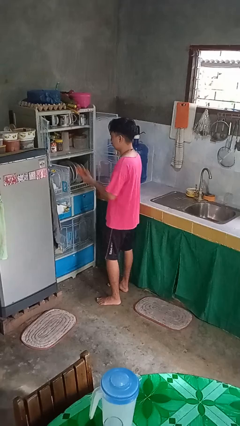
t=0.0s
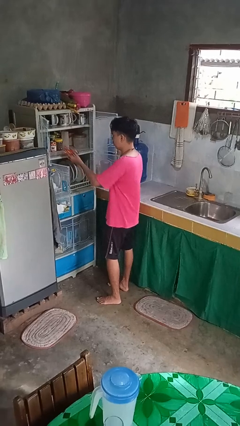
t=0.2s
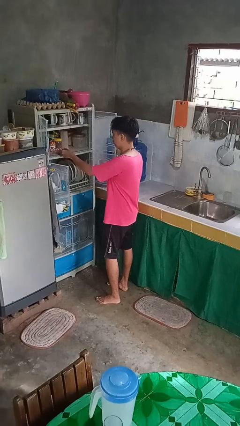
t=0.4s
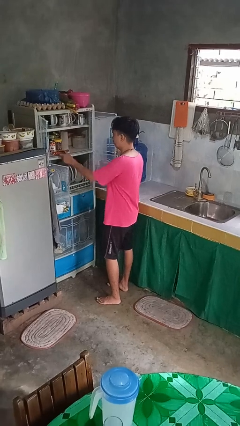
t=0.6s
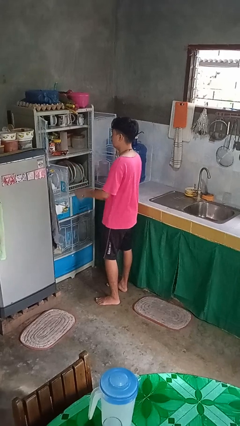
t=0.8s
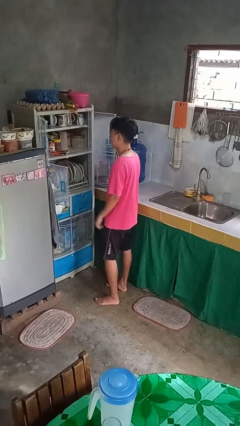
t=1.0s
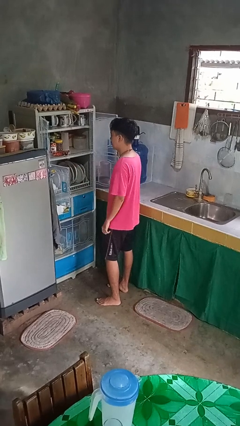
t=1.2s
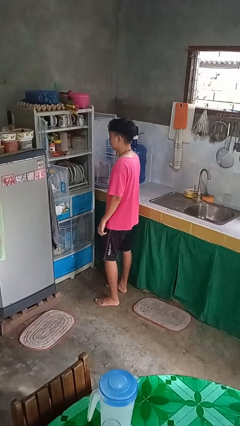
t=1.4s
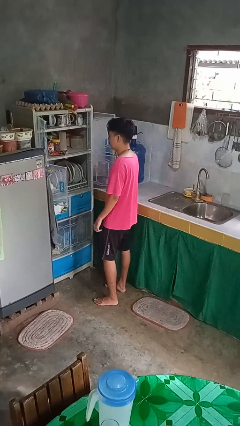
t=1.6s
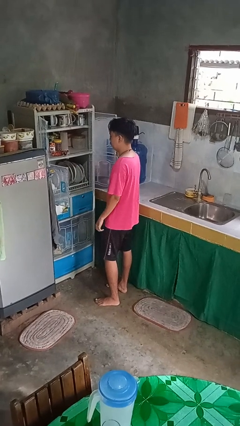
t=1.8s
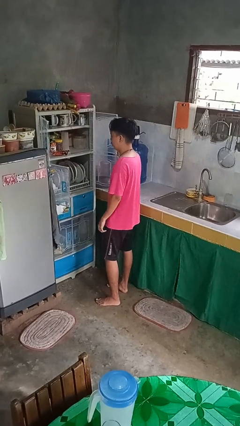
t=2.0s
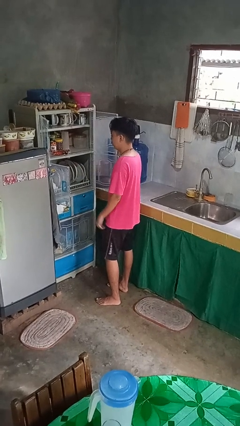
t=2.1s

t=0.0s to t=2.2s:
person puts object in cabinet

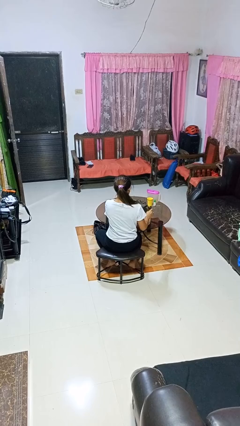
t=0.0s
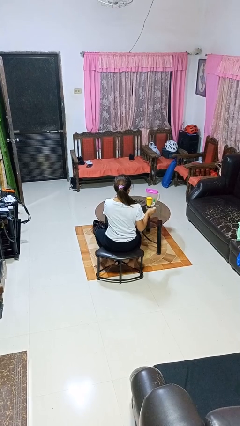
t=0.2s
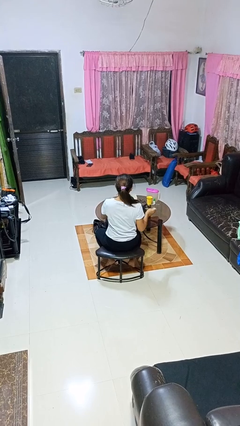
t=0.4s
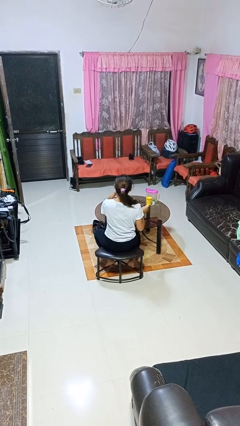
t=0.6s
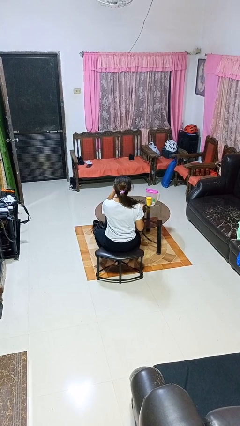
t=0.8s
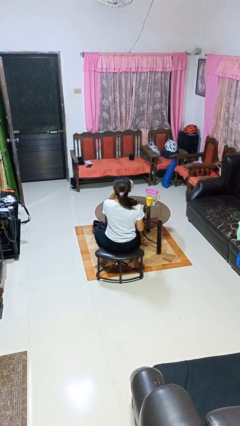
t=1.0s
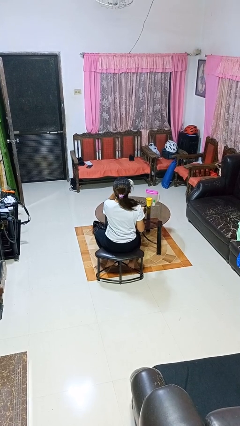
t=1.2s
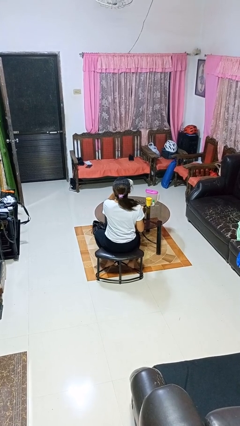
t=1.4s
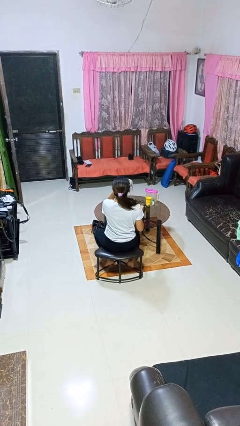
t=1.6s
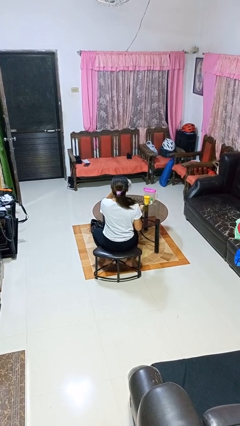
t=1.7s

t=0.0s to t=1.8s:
person drinks from mug

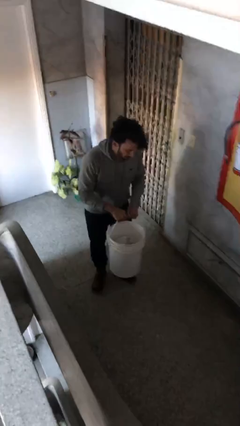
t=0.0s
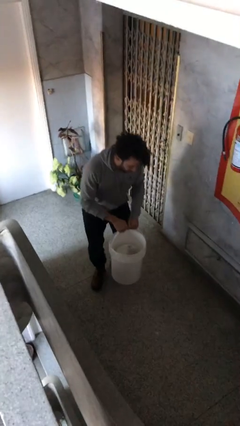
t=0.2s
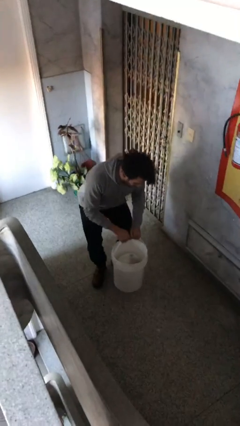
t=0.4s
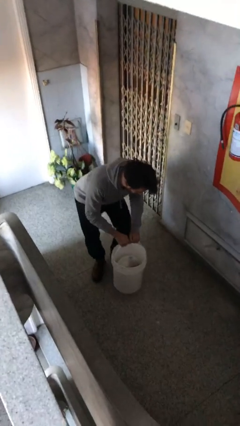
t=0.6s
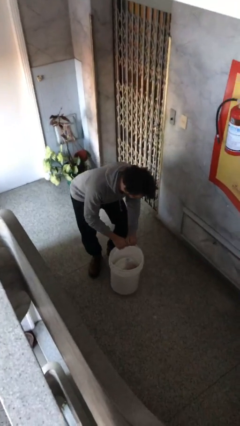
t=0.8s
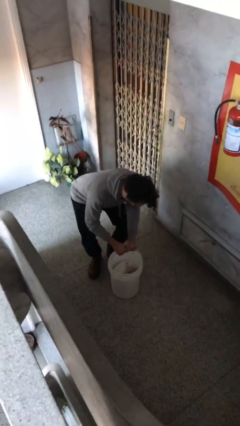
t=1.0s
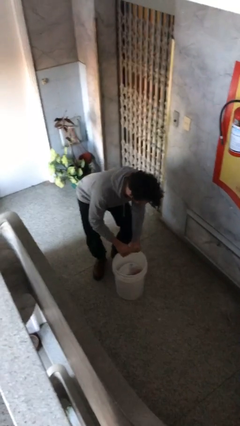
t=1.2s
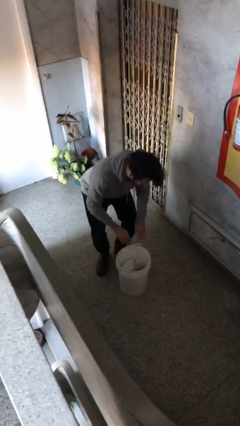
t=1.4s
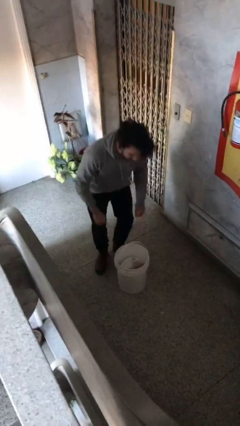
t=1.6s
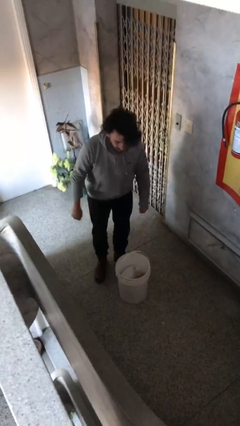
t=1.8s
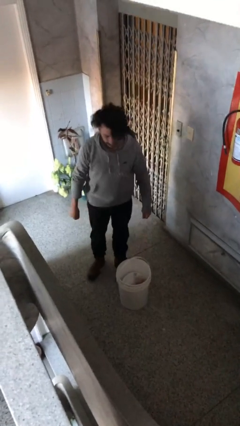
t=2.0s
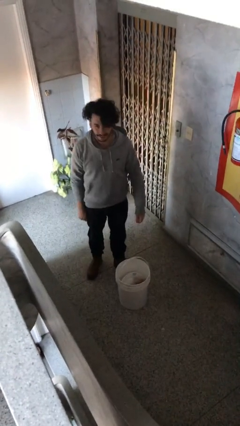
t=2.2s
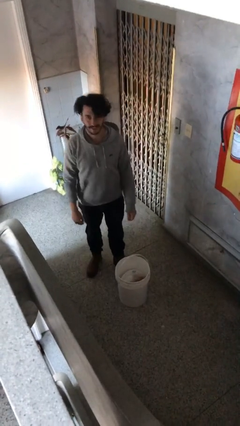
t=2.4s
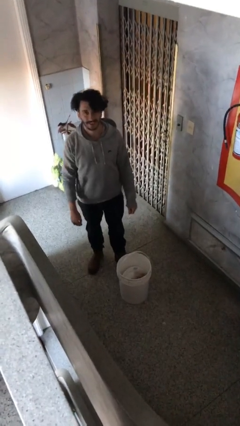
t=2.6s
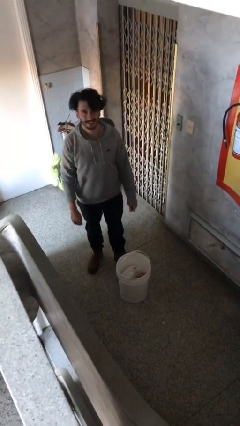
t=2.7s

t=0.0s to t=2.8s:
person puts down object on floor

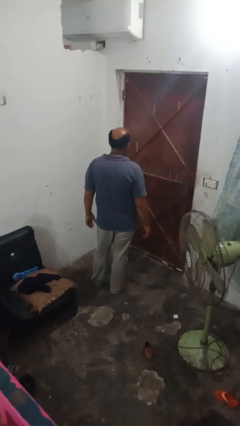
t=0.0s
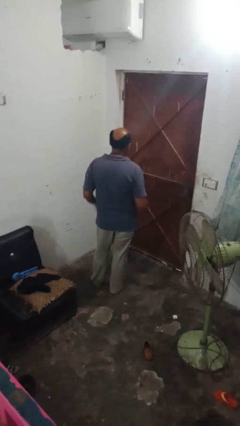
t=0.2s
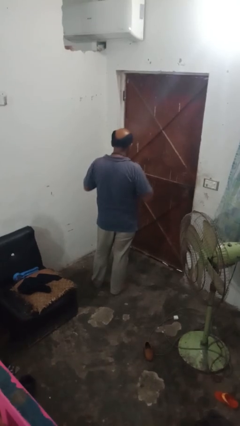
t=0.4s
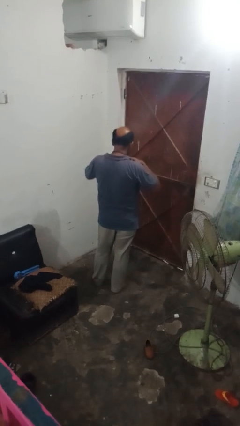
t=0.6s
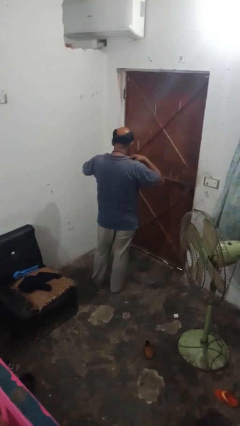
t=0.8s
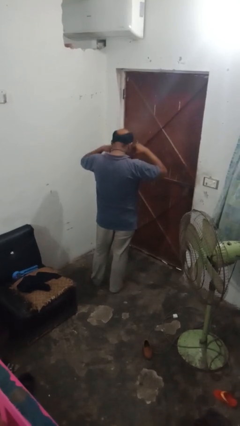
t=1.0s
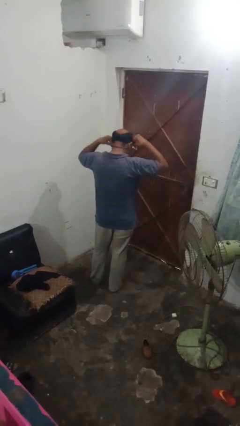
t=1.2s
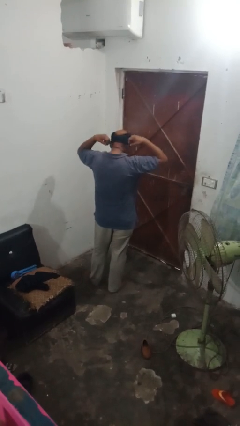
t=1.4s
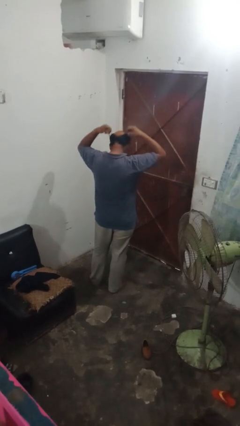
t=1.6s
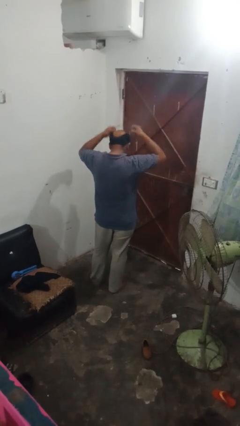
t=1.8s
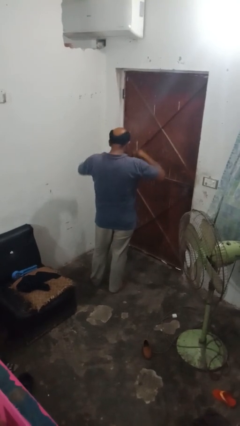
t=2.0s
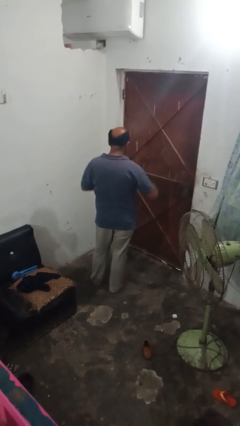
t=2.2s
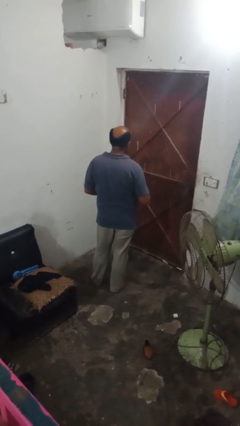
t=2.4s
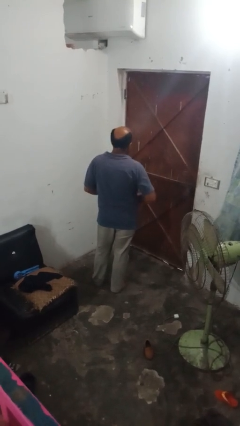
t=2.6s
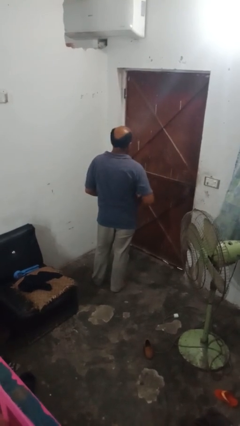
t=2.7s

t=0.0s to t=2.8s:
person takes off necklace

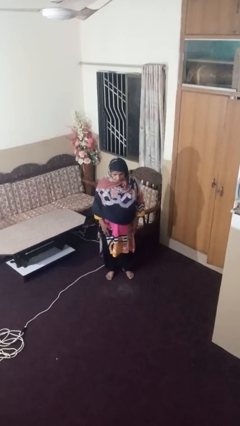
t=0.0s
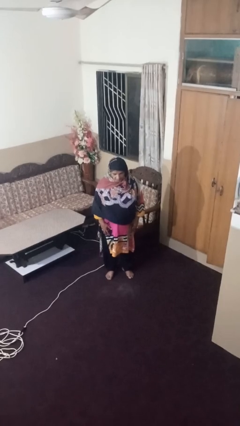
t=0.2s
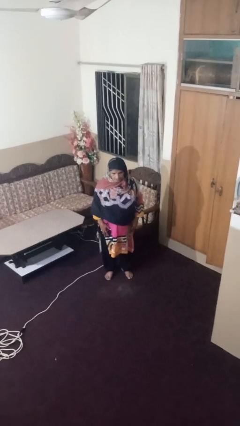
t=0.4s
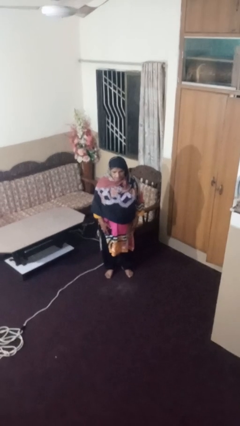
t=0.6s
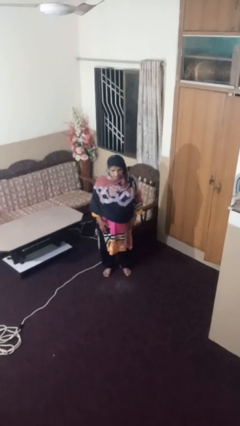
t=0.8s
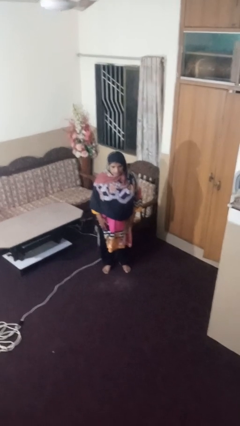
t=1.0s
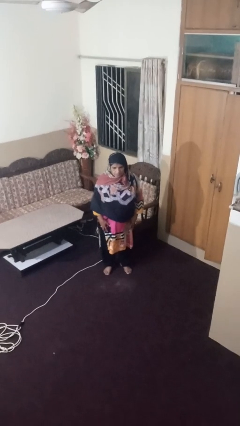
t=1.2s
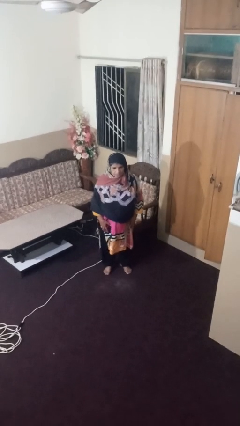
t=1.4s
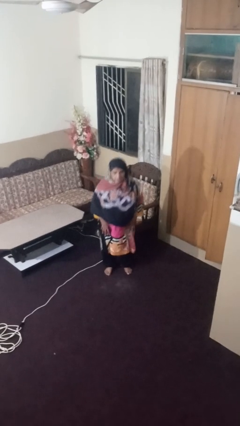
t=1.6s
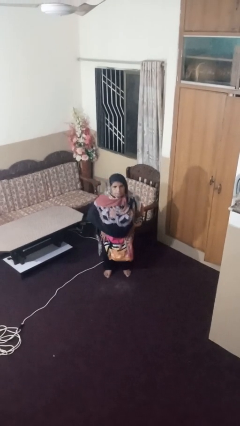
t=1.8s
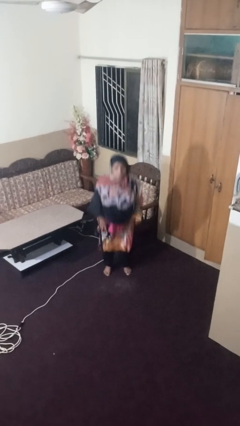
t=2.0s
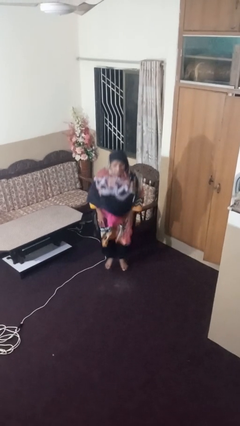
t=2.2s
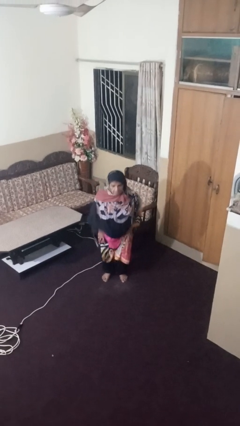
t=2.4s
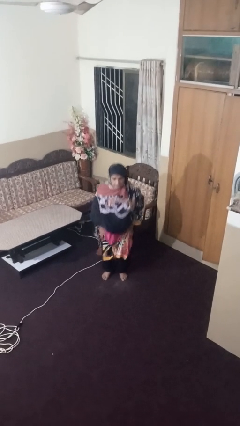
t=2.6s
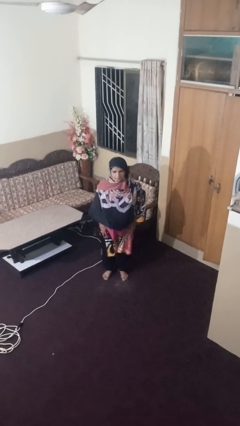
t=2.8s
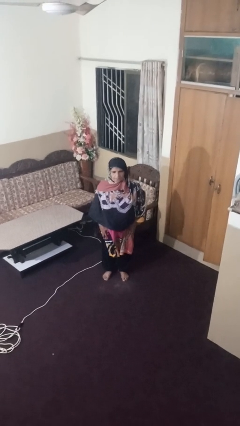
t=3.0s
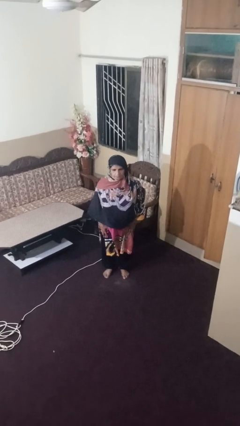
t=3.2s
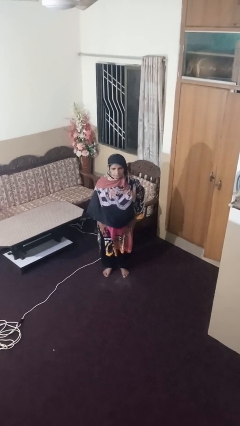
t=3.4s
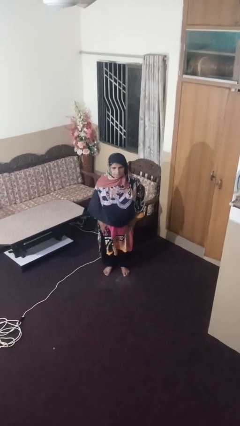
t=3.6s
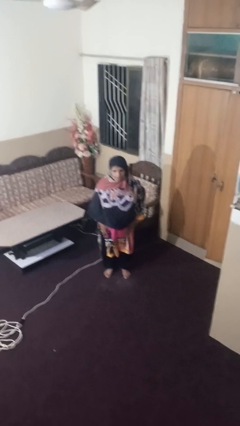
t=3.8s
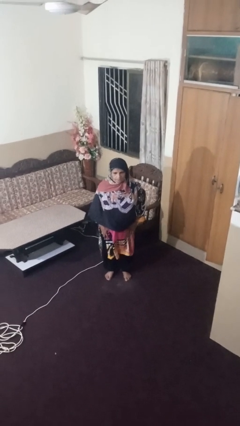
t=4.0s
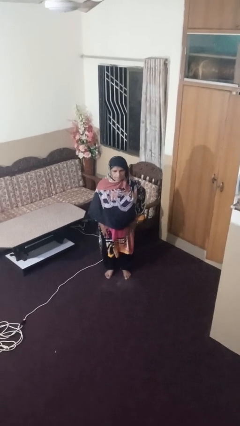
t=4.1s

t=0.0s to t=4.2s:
person jumps

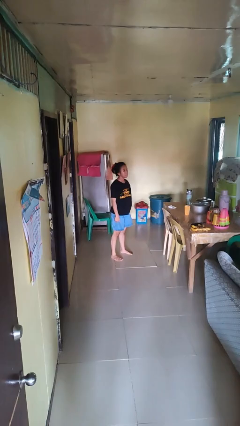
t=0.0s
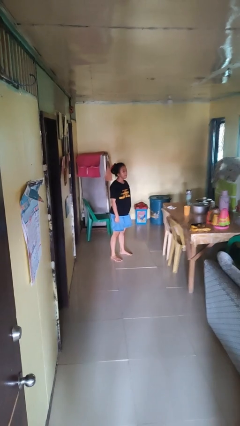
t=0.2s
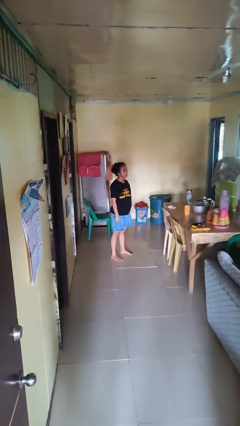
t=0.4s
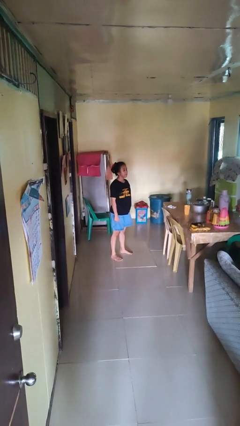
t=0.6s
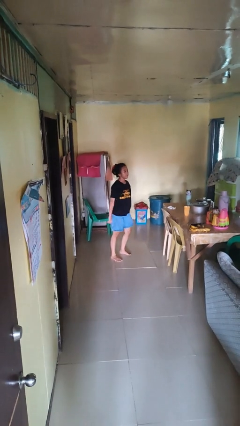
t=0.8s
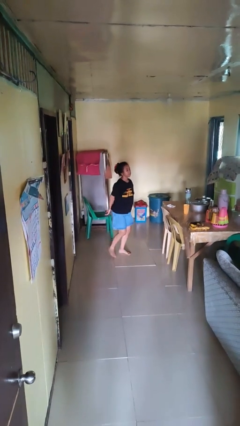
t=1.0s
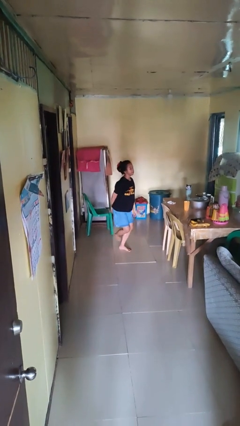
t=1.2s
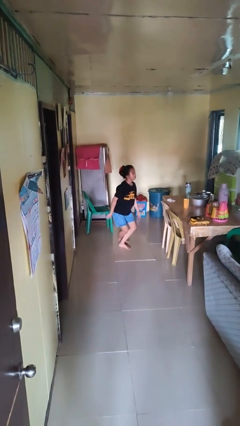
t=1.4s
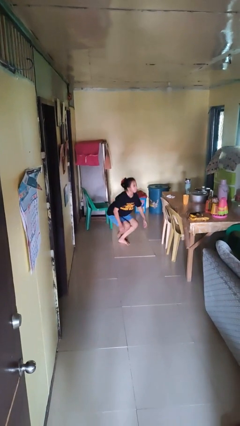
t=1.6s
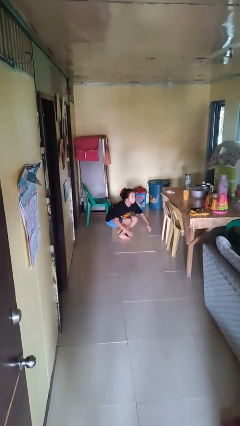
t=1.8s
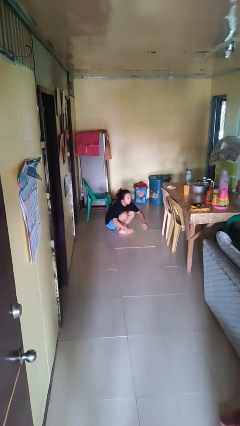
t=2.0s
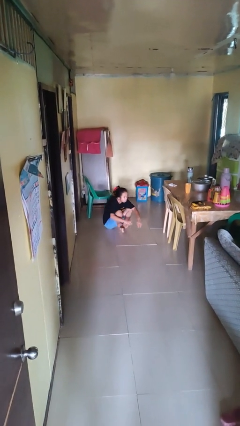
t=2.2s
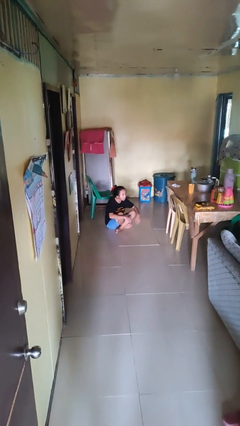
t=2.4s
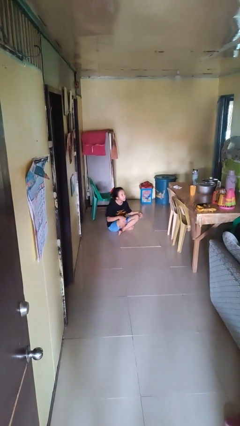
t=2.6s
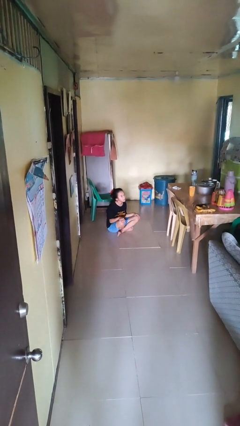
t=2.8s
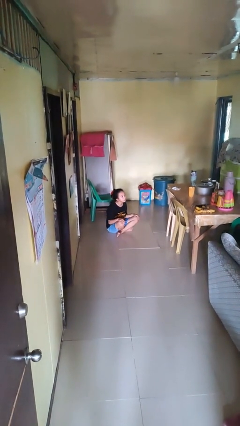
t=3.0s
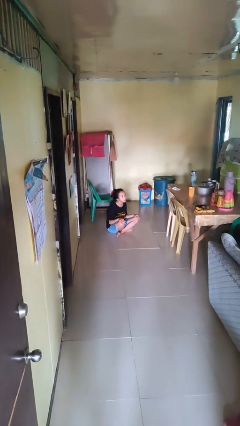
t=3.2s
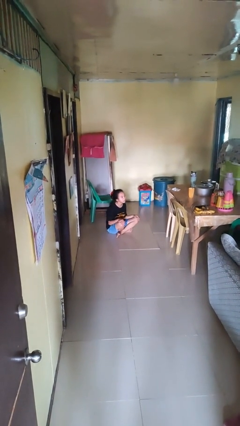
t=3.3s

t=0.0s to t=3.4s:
person sits crisscross

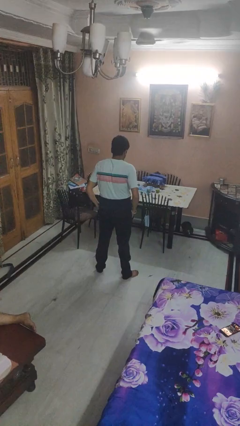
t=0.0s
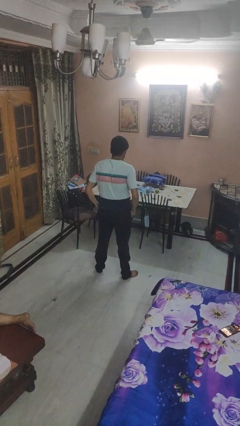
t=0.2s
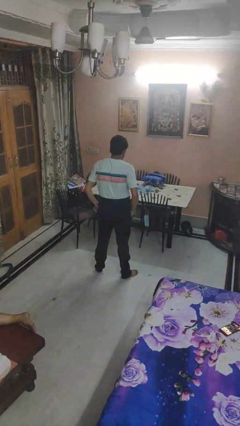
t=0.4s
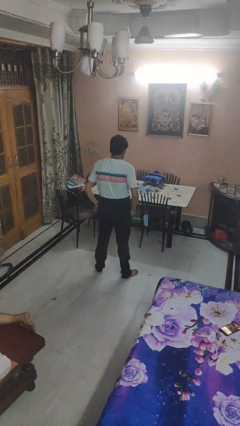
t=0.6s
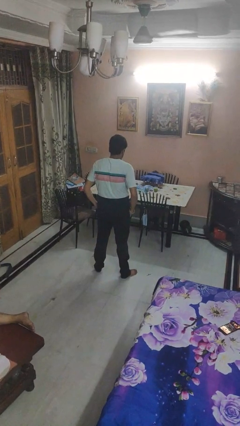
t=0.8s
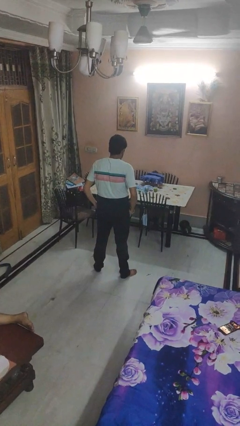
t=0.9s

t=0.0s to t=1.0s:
person puts hands in back pockets
